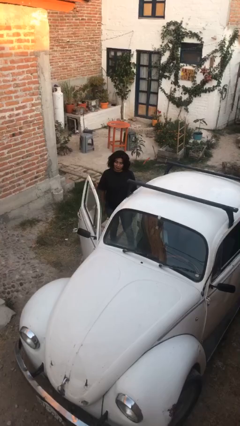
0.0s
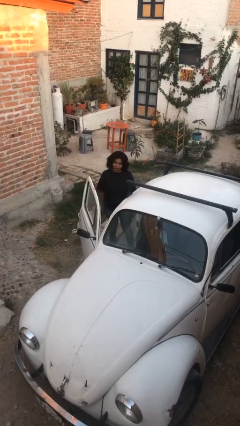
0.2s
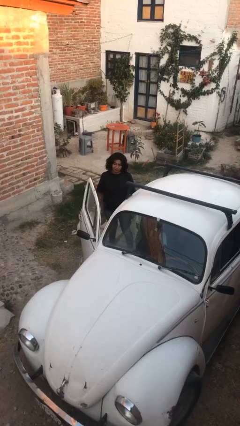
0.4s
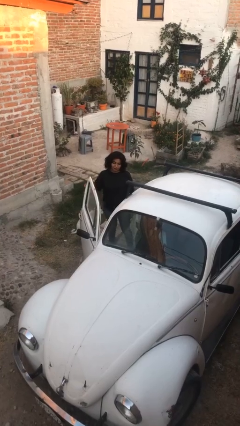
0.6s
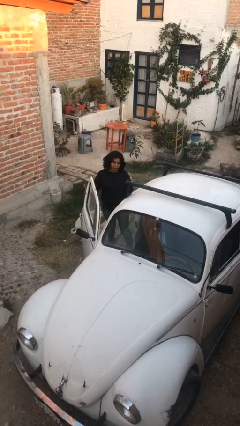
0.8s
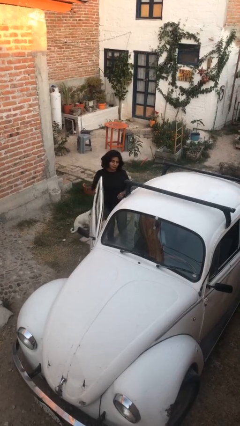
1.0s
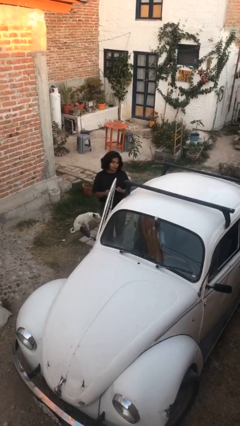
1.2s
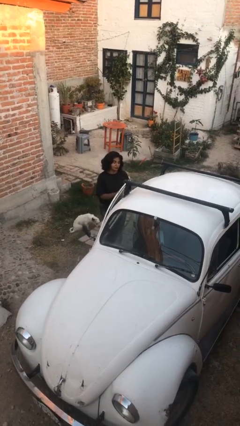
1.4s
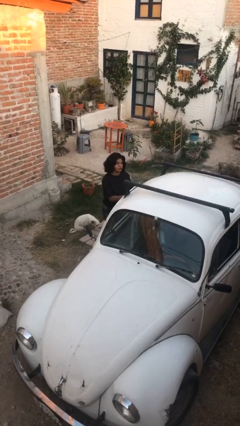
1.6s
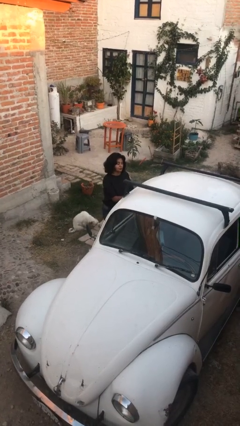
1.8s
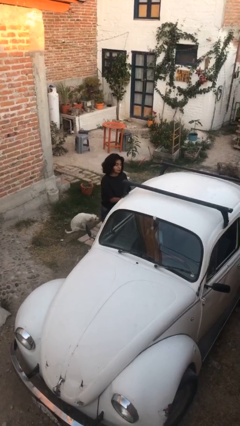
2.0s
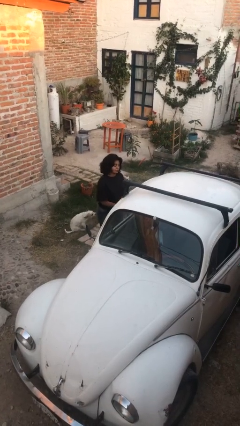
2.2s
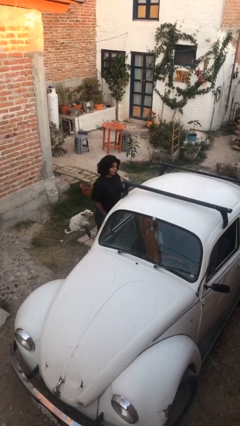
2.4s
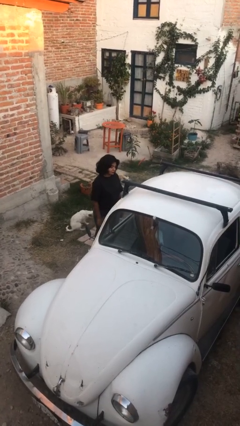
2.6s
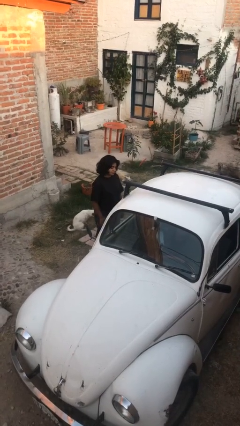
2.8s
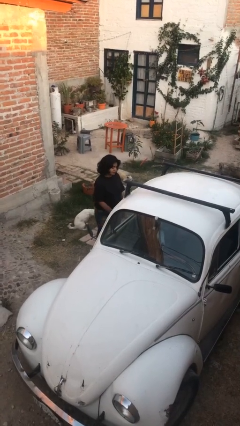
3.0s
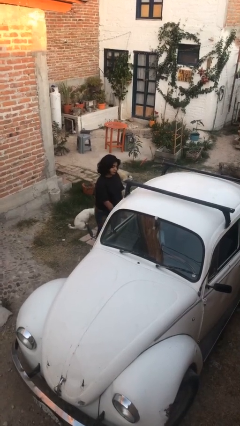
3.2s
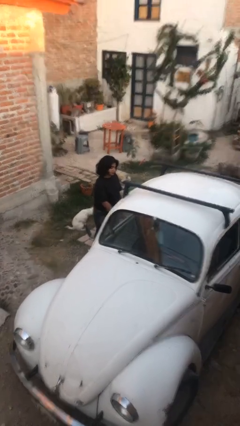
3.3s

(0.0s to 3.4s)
person closes car door

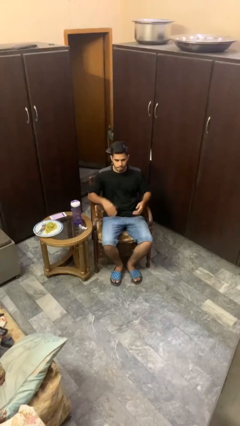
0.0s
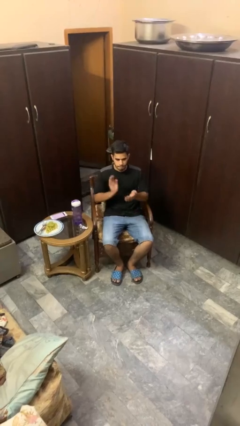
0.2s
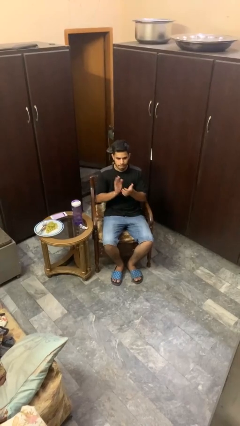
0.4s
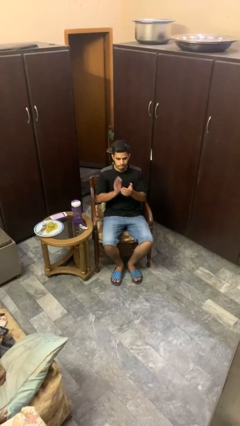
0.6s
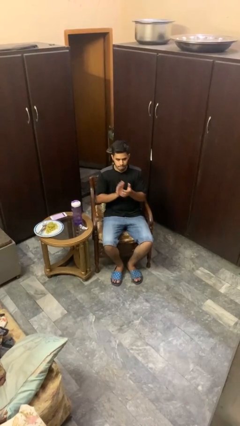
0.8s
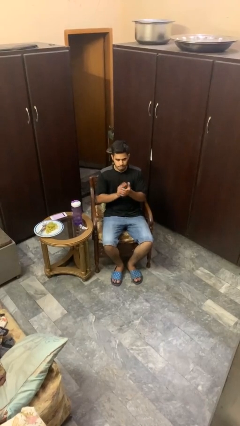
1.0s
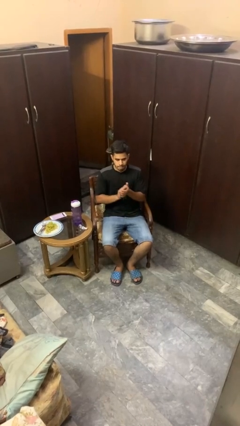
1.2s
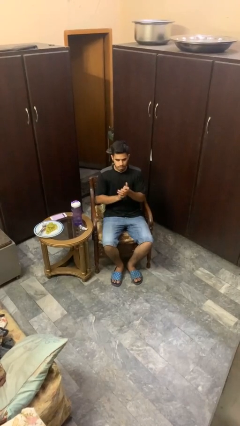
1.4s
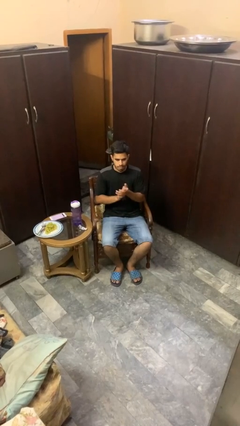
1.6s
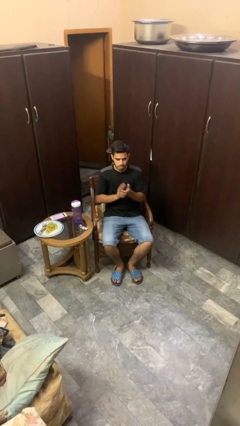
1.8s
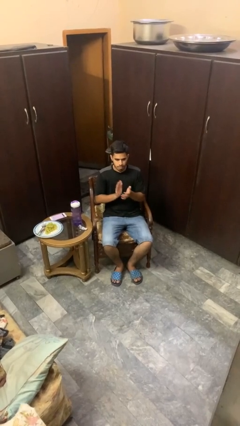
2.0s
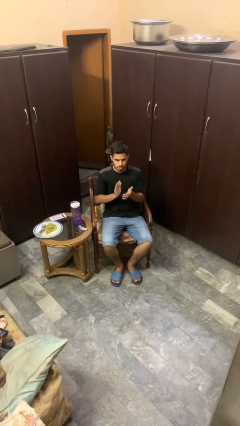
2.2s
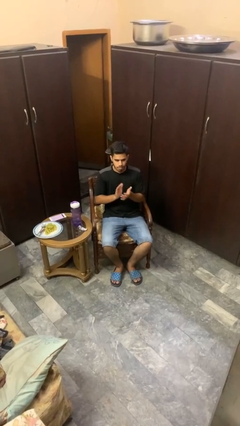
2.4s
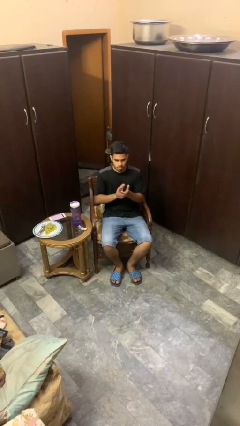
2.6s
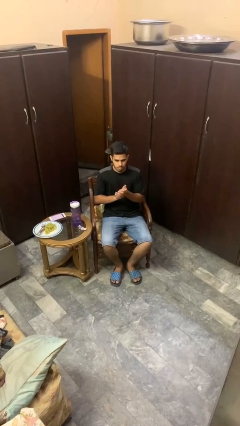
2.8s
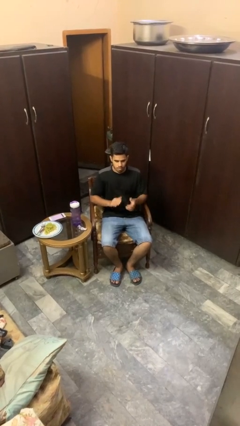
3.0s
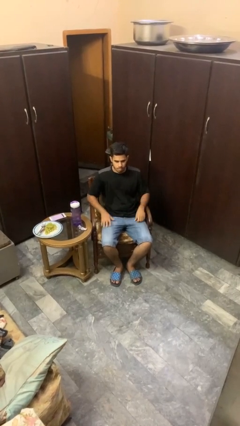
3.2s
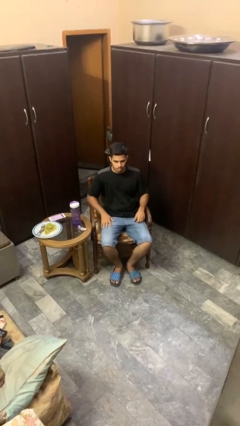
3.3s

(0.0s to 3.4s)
person claps hands

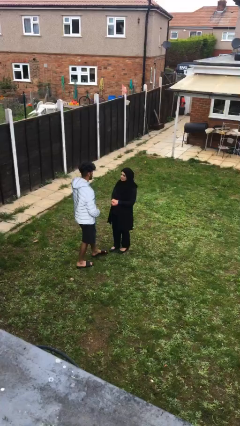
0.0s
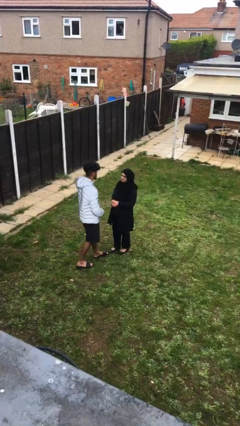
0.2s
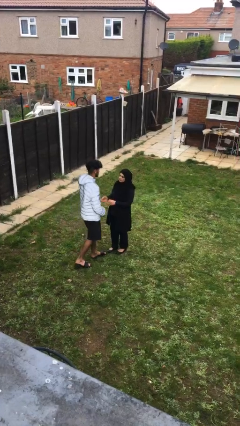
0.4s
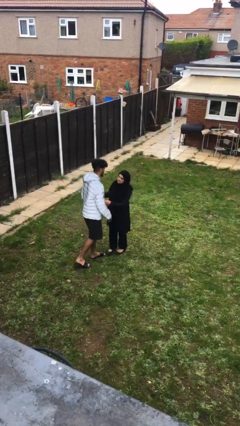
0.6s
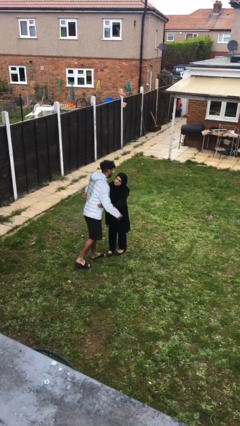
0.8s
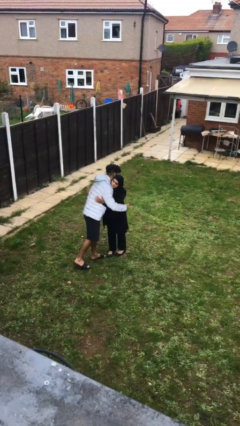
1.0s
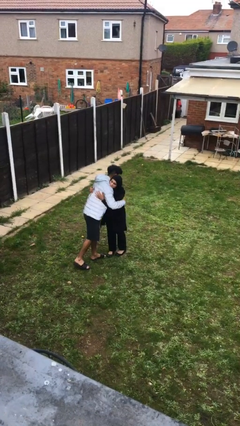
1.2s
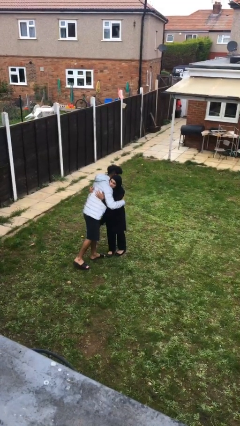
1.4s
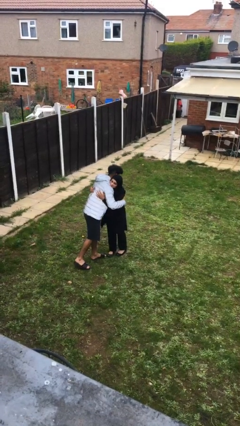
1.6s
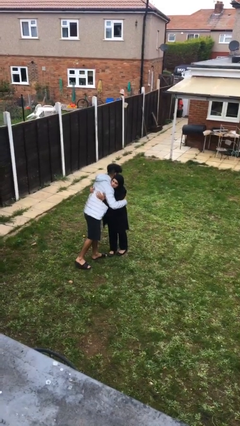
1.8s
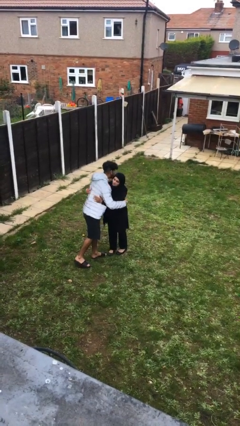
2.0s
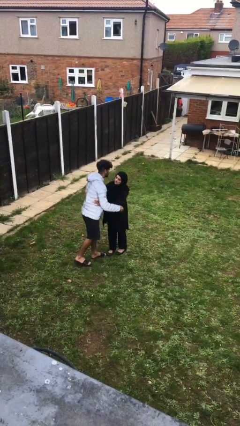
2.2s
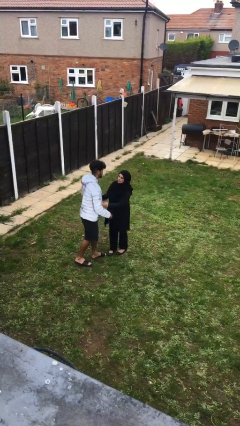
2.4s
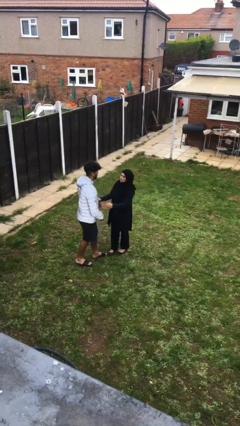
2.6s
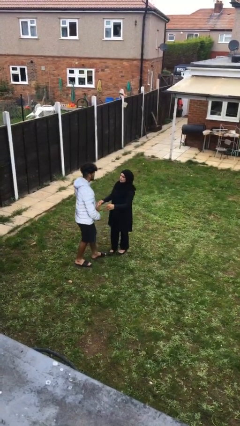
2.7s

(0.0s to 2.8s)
person embraces person

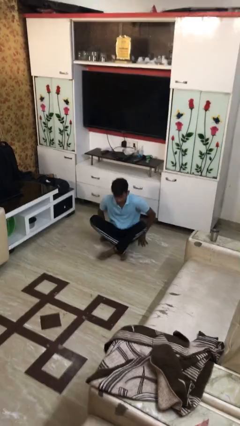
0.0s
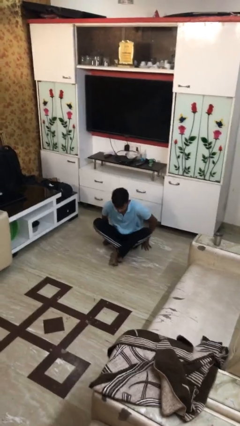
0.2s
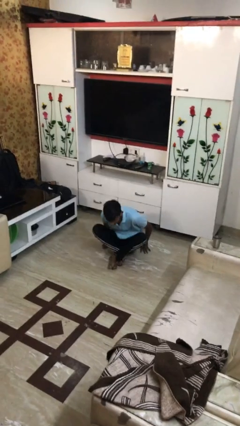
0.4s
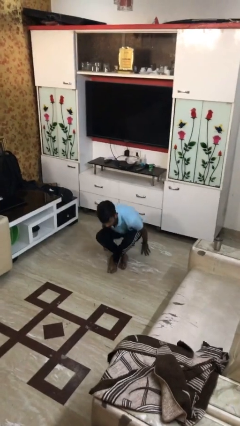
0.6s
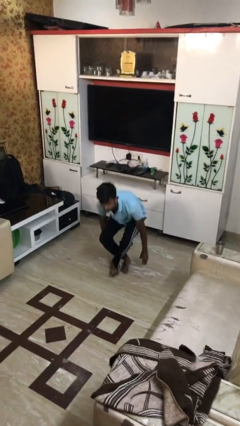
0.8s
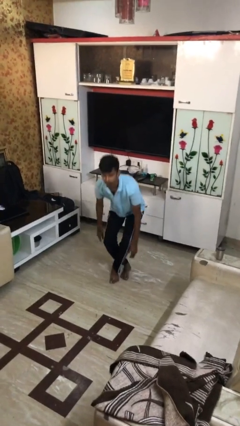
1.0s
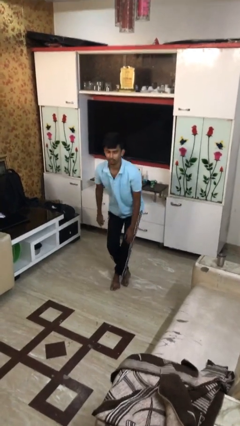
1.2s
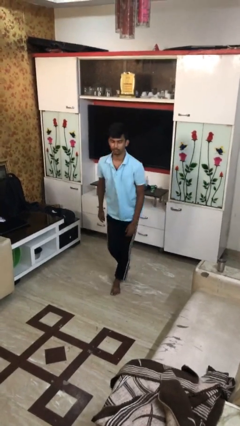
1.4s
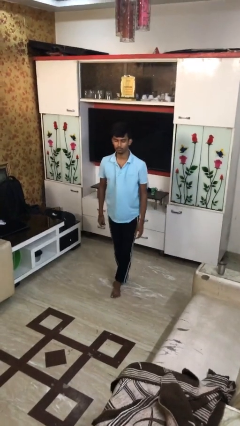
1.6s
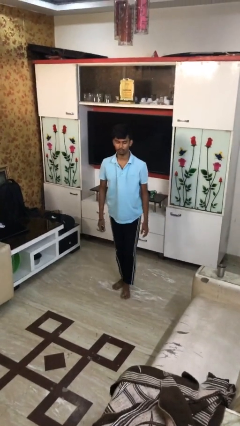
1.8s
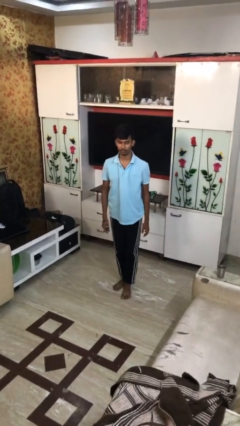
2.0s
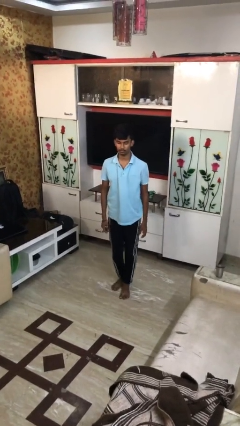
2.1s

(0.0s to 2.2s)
person stands up from floor

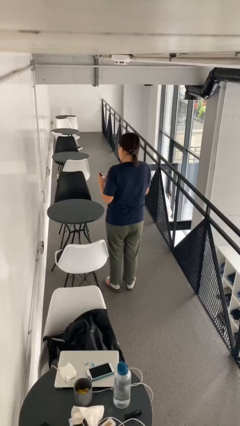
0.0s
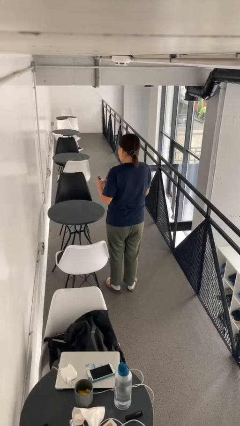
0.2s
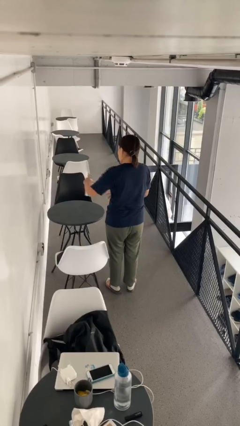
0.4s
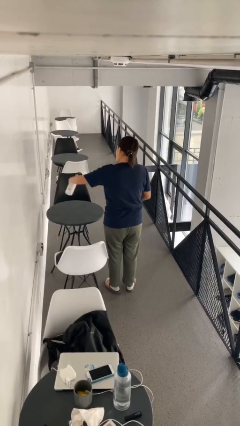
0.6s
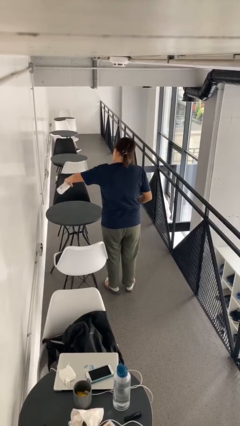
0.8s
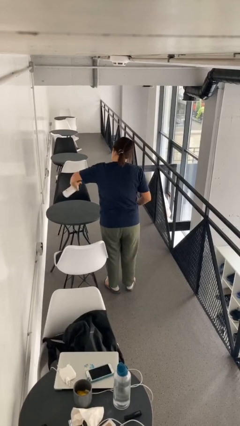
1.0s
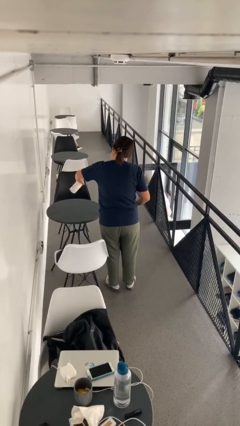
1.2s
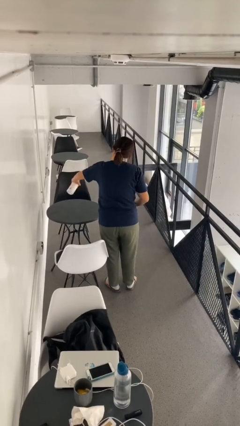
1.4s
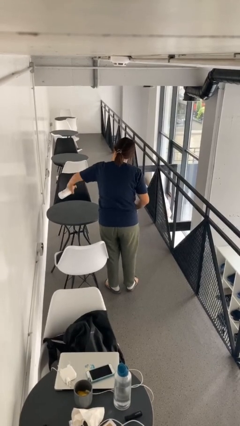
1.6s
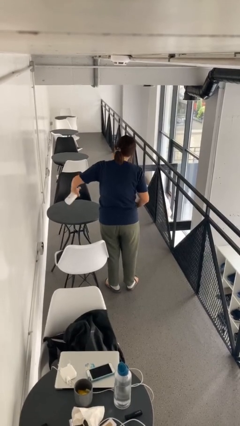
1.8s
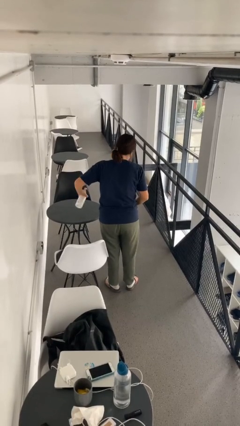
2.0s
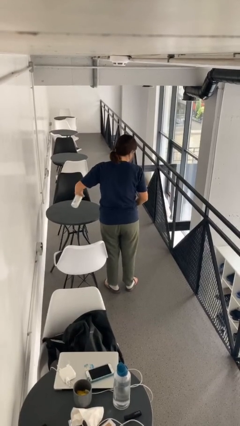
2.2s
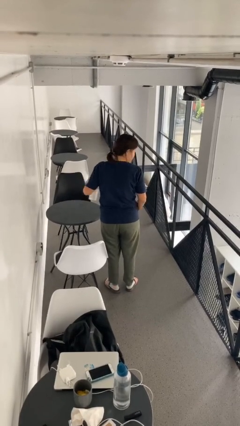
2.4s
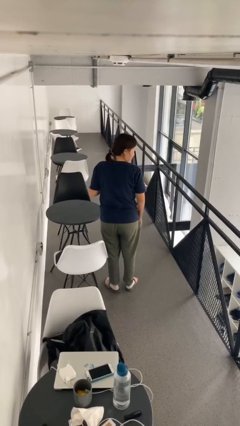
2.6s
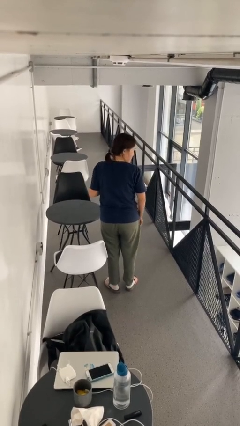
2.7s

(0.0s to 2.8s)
person sprays from bottle

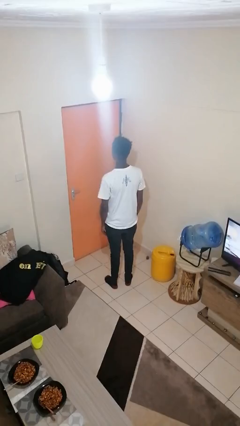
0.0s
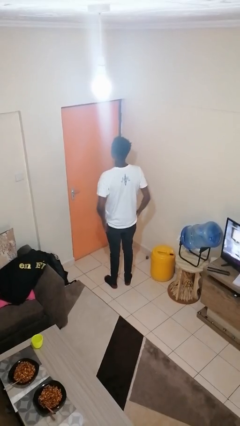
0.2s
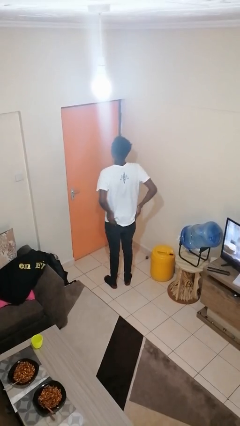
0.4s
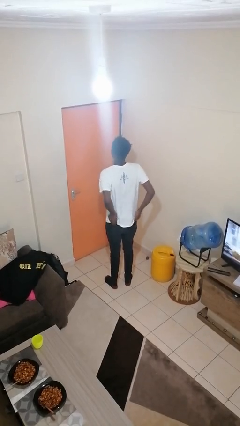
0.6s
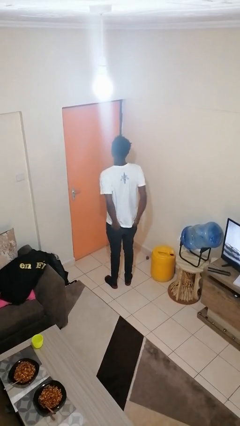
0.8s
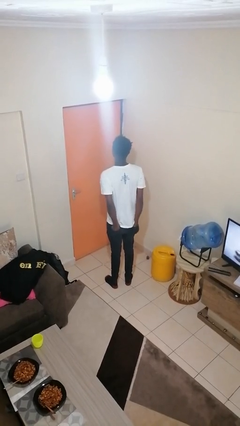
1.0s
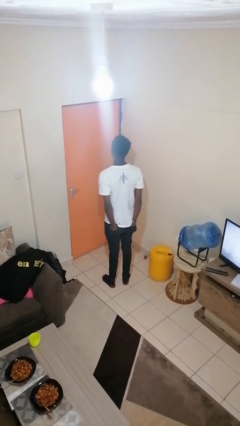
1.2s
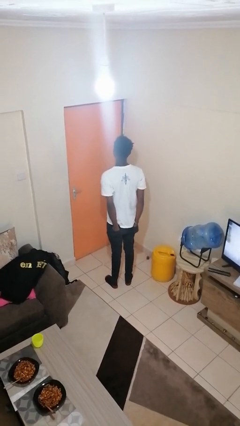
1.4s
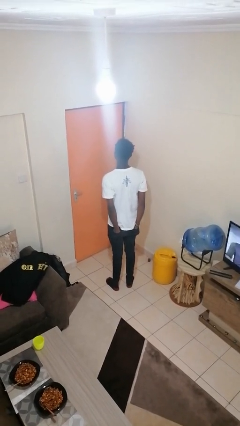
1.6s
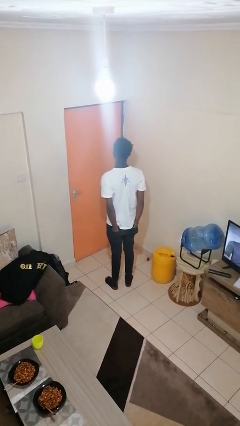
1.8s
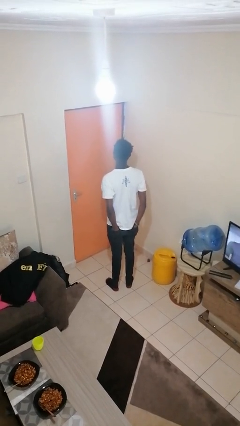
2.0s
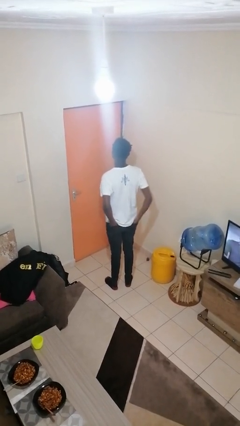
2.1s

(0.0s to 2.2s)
person puts hands in back pockets

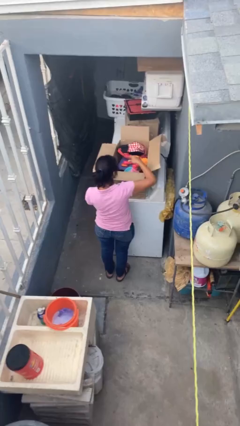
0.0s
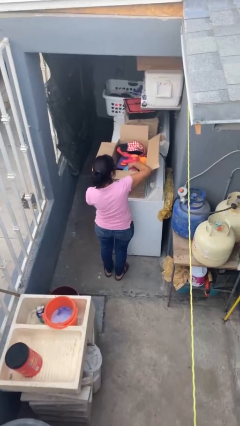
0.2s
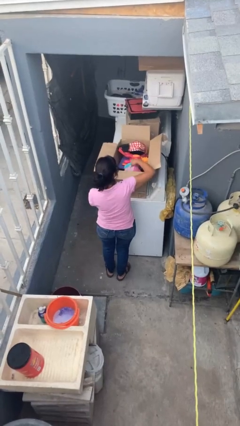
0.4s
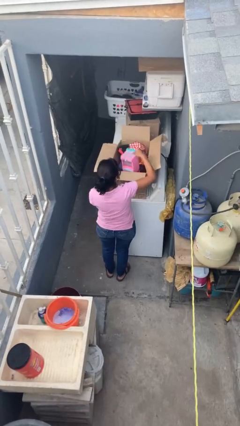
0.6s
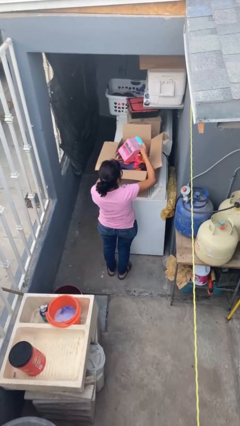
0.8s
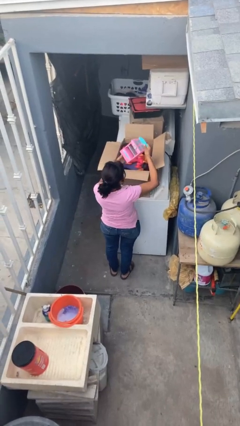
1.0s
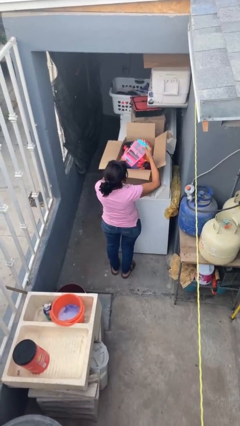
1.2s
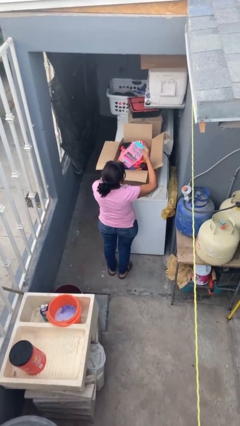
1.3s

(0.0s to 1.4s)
person takes object from box
